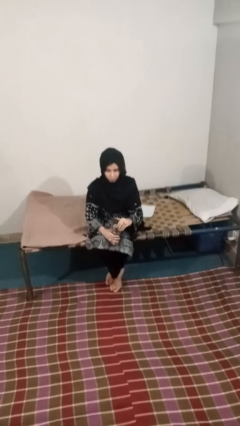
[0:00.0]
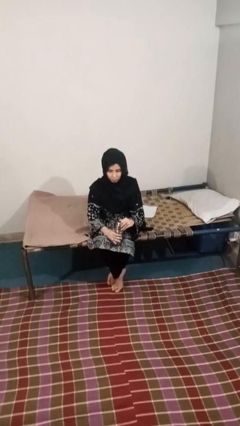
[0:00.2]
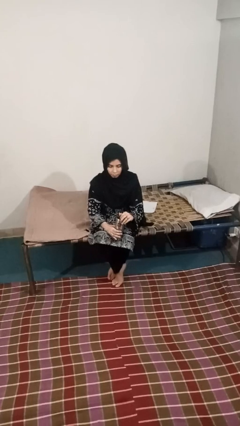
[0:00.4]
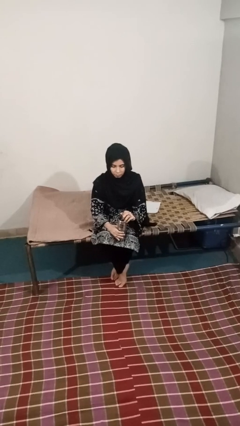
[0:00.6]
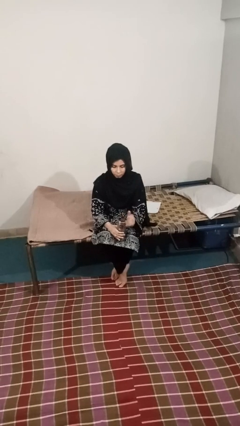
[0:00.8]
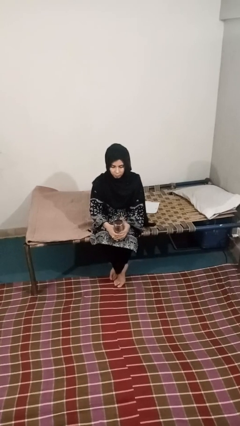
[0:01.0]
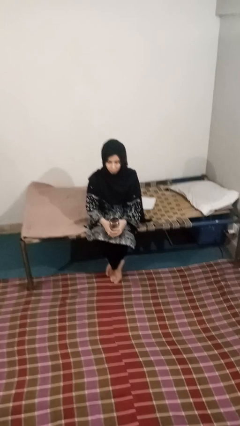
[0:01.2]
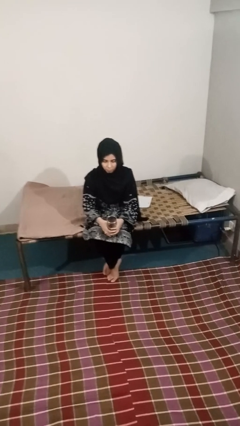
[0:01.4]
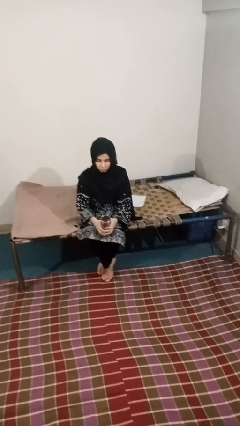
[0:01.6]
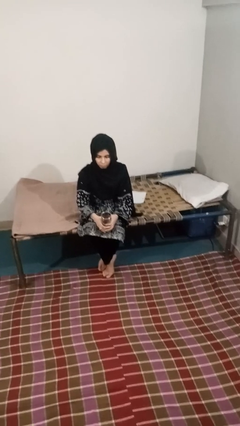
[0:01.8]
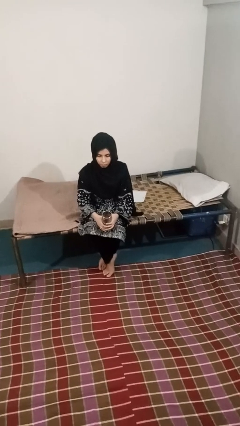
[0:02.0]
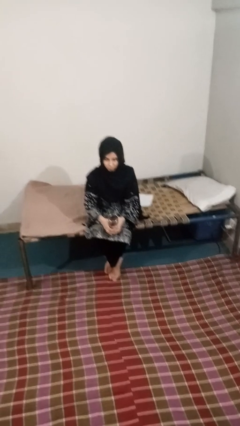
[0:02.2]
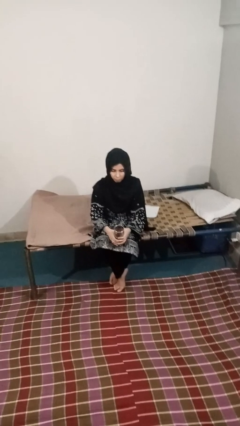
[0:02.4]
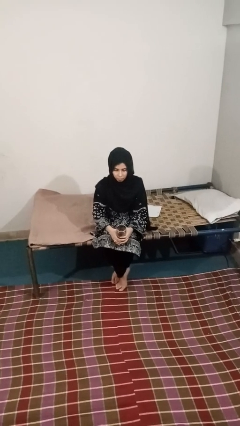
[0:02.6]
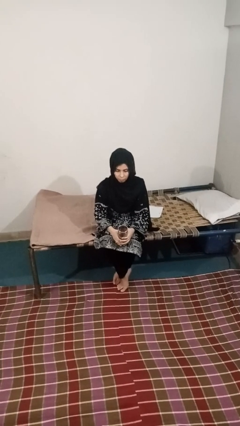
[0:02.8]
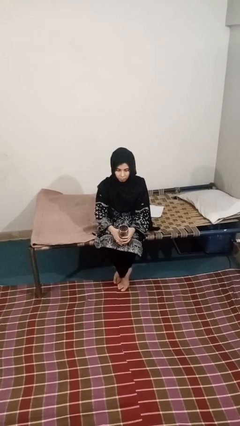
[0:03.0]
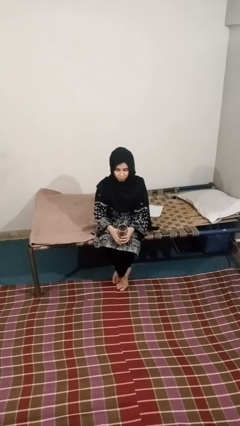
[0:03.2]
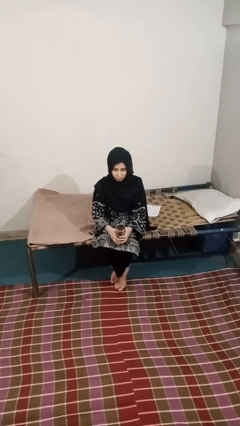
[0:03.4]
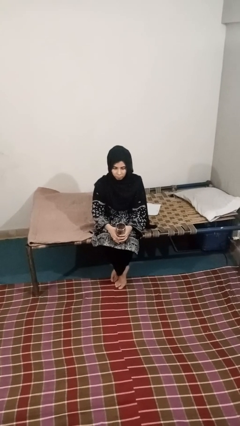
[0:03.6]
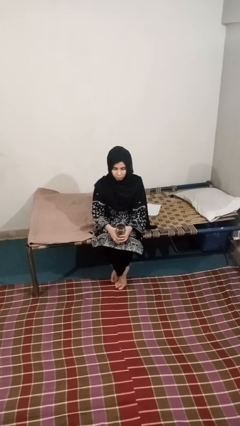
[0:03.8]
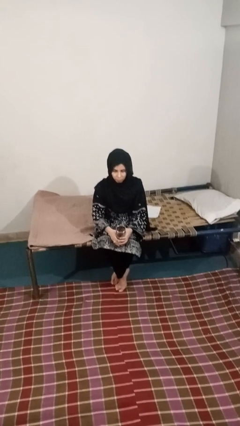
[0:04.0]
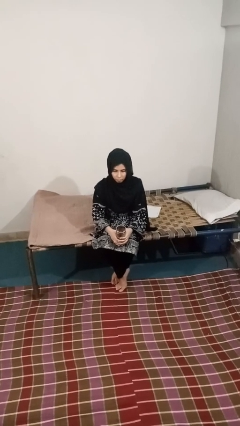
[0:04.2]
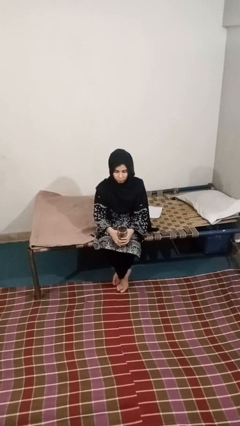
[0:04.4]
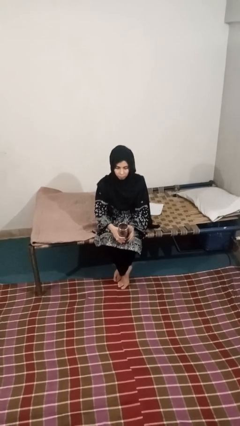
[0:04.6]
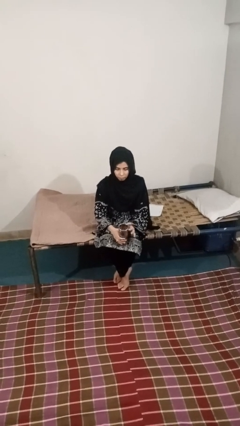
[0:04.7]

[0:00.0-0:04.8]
person opens beverage can

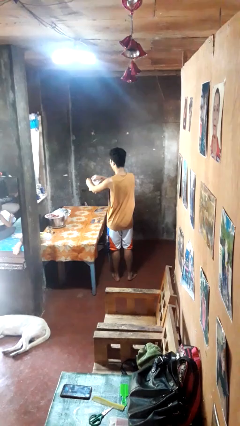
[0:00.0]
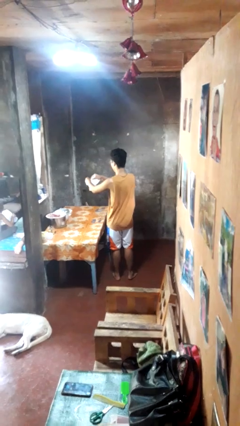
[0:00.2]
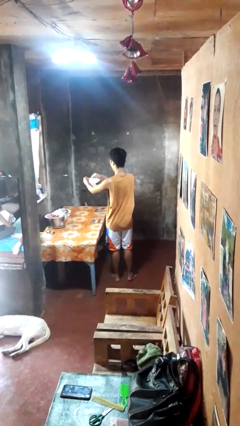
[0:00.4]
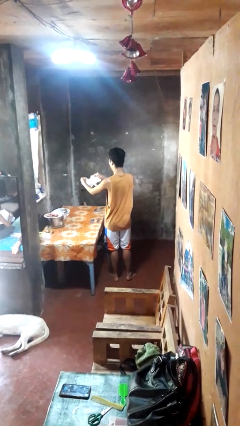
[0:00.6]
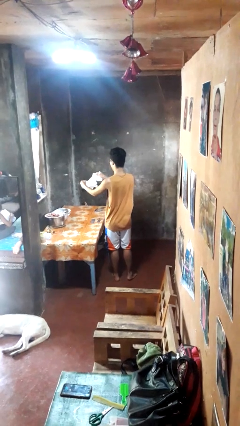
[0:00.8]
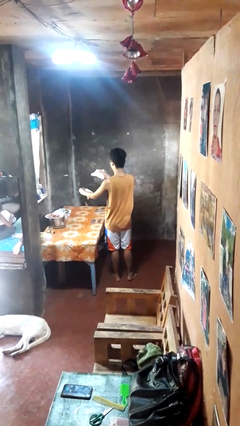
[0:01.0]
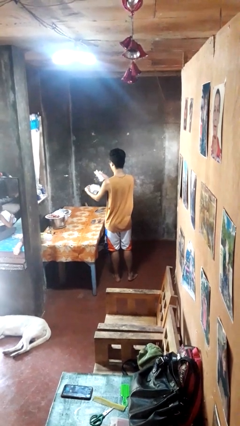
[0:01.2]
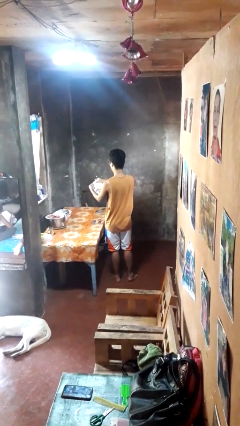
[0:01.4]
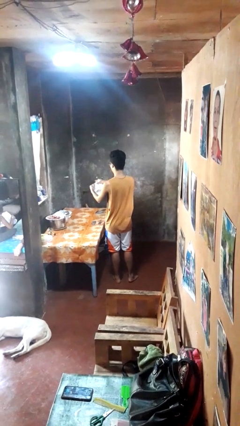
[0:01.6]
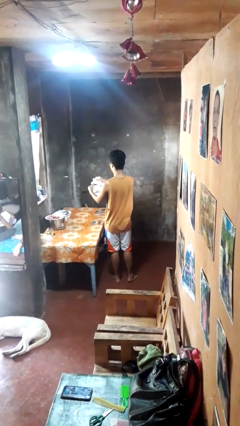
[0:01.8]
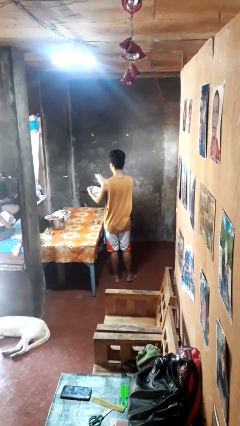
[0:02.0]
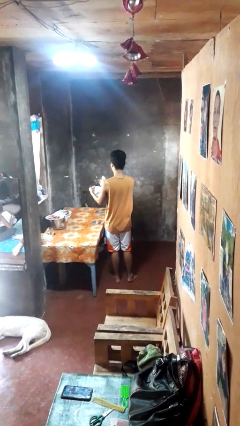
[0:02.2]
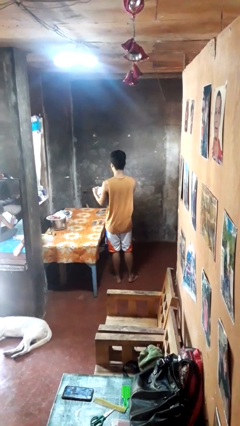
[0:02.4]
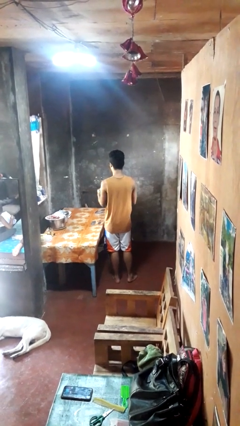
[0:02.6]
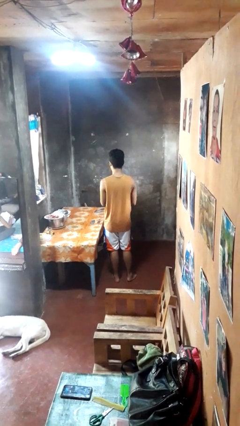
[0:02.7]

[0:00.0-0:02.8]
person tears paper

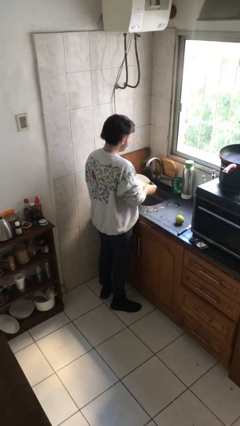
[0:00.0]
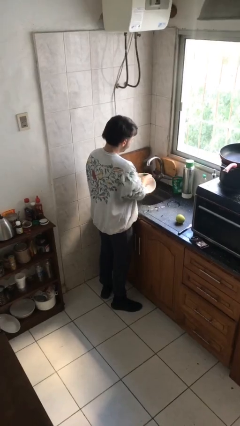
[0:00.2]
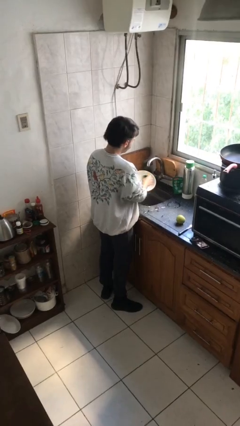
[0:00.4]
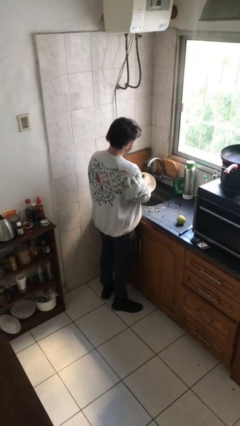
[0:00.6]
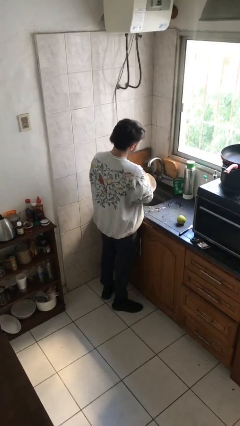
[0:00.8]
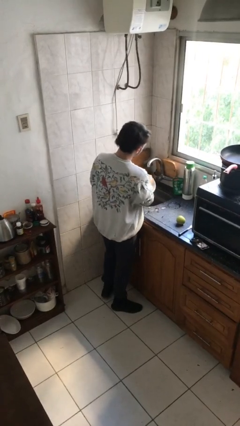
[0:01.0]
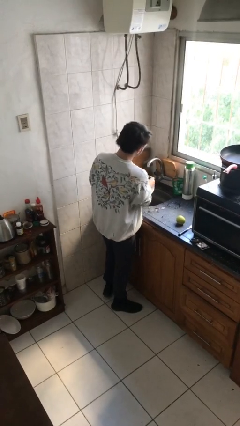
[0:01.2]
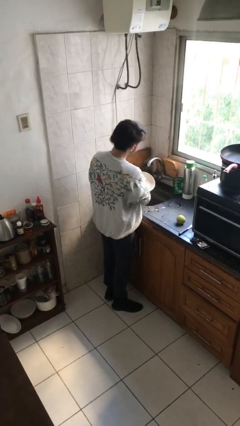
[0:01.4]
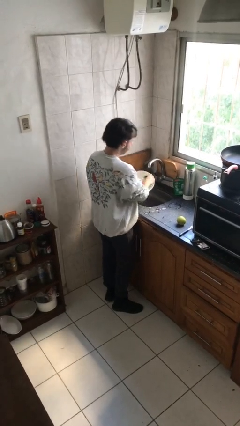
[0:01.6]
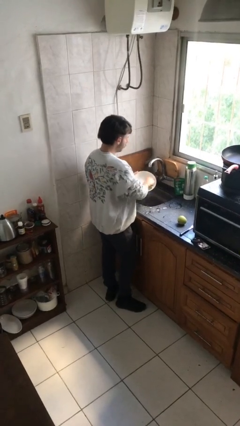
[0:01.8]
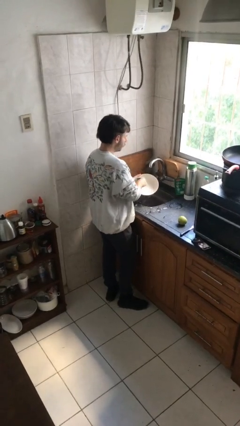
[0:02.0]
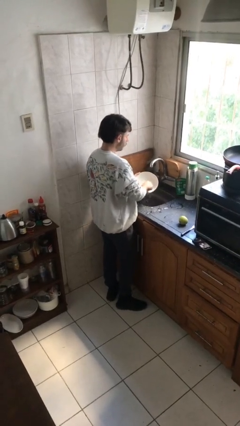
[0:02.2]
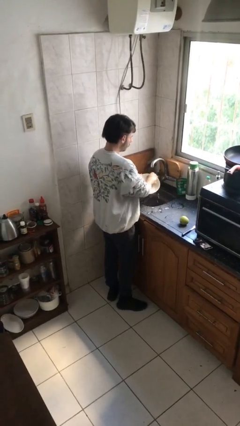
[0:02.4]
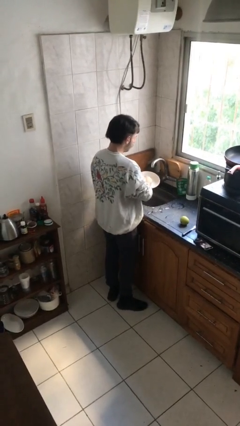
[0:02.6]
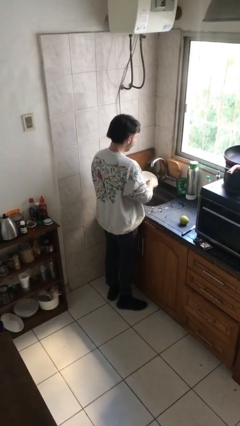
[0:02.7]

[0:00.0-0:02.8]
person washes dish

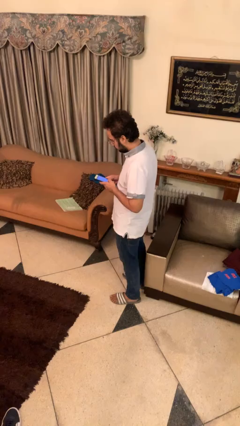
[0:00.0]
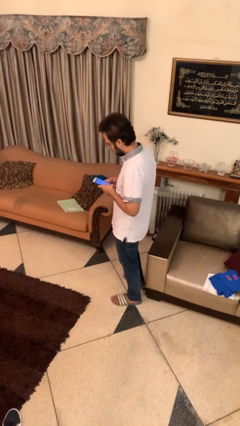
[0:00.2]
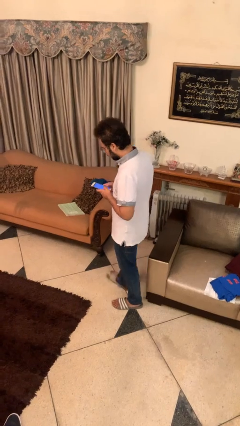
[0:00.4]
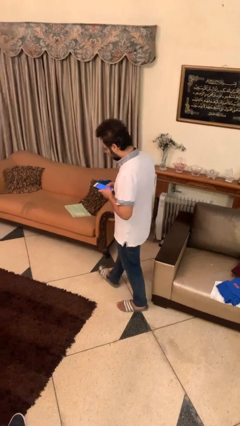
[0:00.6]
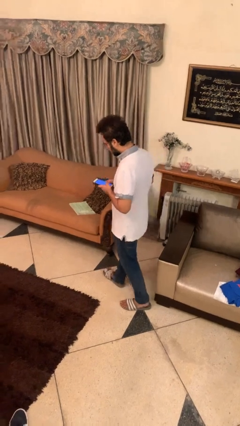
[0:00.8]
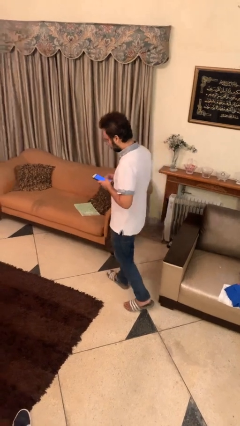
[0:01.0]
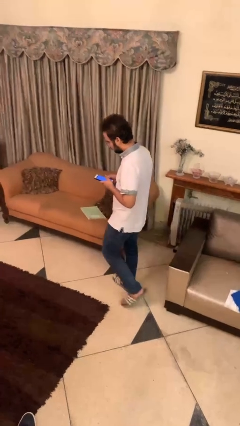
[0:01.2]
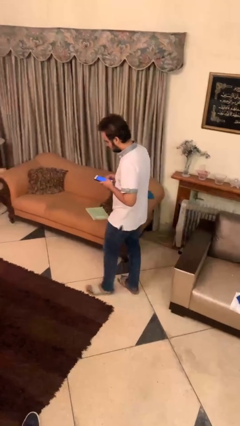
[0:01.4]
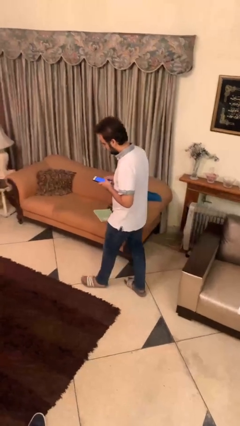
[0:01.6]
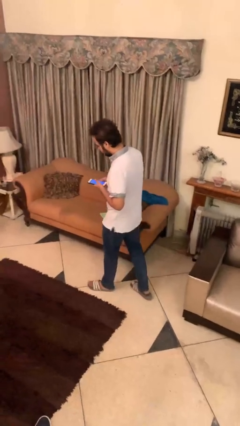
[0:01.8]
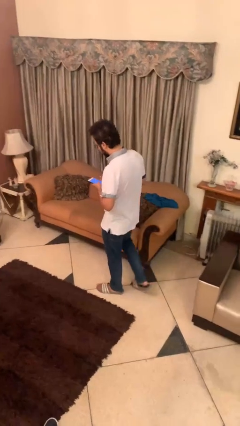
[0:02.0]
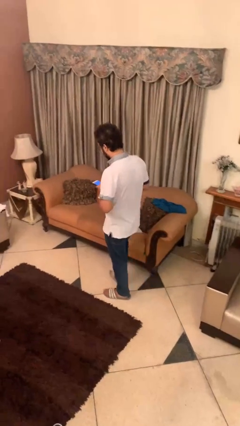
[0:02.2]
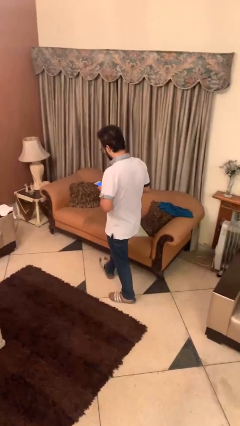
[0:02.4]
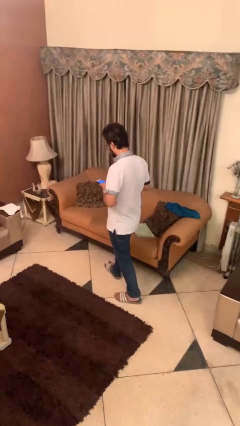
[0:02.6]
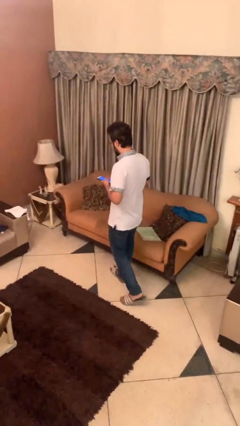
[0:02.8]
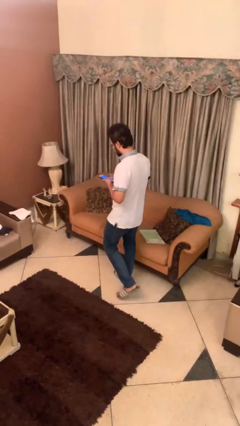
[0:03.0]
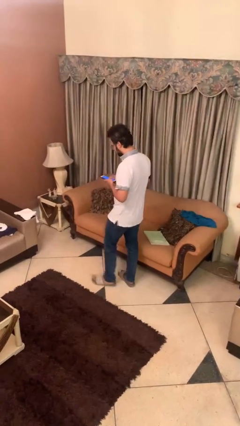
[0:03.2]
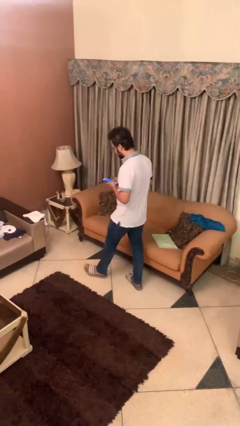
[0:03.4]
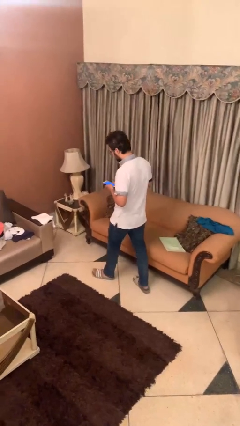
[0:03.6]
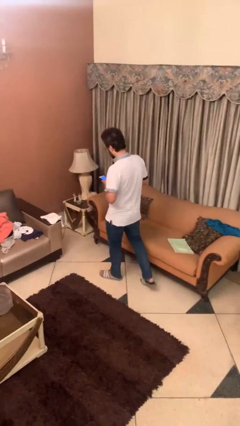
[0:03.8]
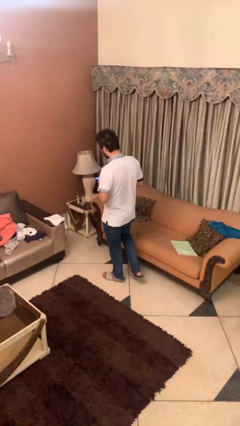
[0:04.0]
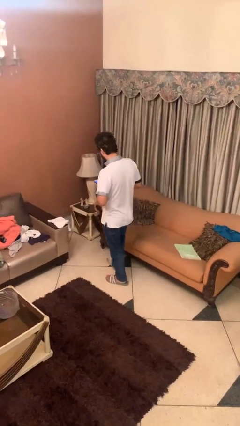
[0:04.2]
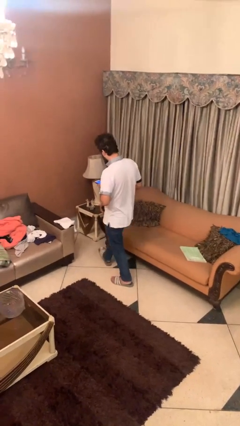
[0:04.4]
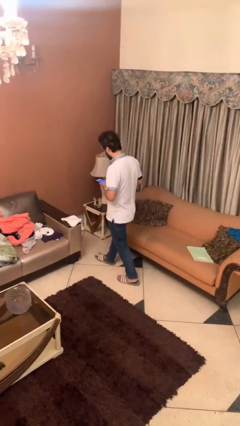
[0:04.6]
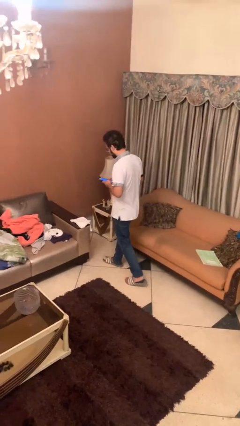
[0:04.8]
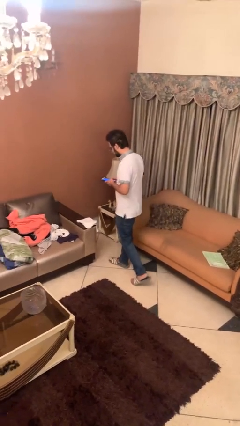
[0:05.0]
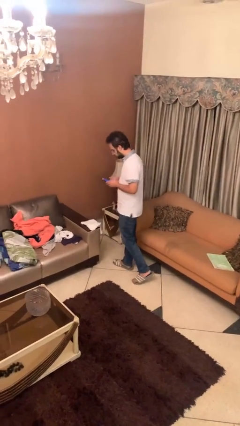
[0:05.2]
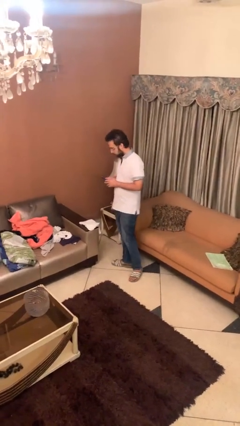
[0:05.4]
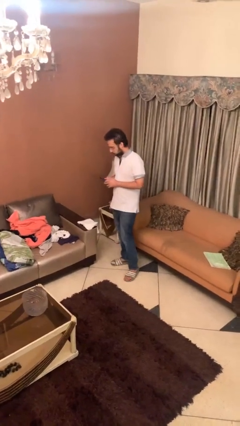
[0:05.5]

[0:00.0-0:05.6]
person texts on phone

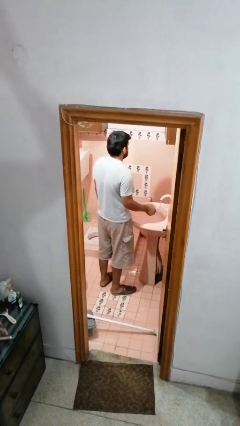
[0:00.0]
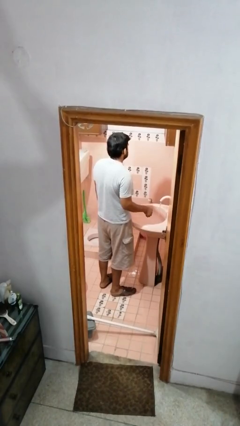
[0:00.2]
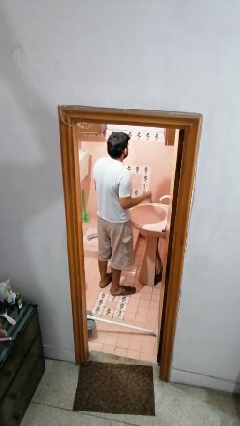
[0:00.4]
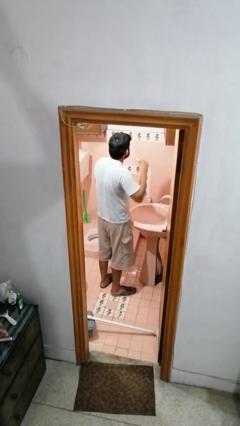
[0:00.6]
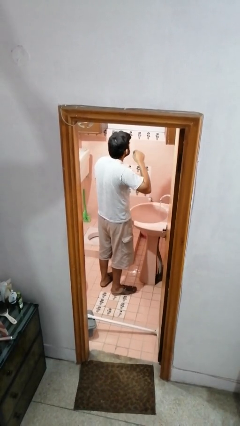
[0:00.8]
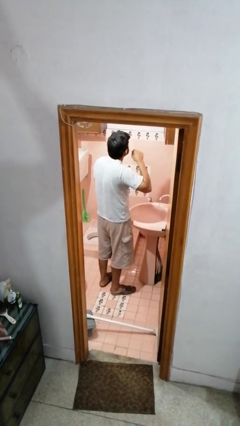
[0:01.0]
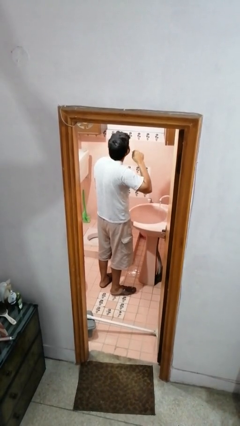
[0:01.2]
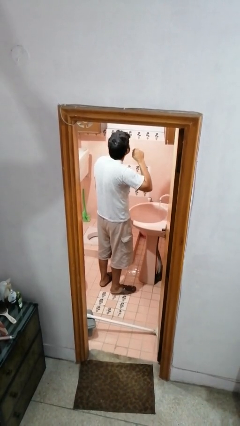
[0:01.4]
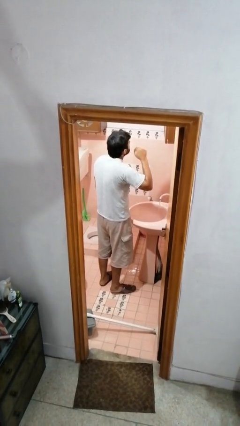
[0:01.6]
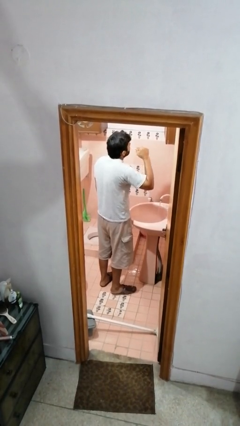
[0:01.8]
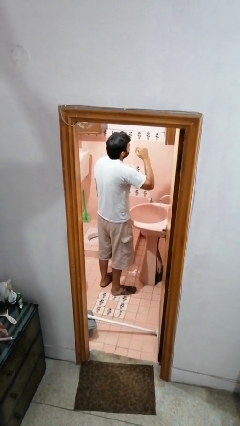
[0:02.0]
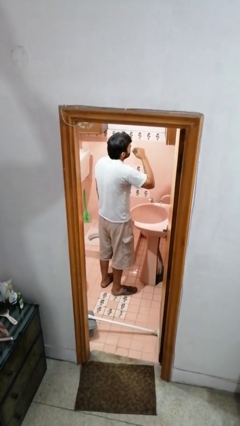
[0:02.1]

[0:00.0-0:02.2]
person brushes teeth
